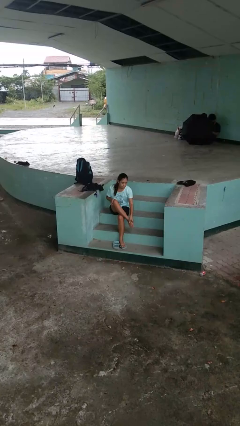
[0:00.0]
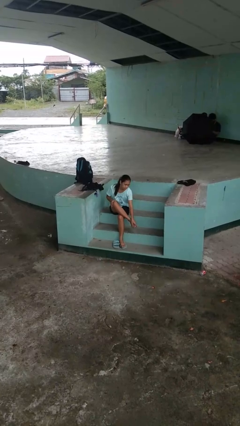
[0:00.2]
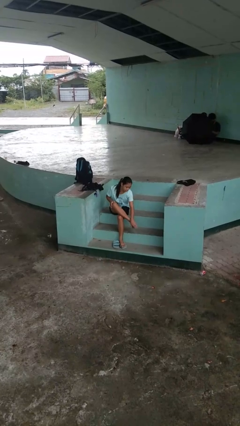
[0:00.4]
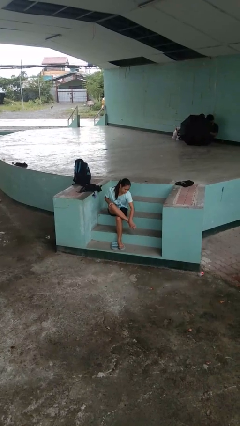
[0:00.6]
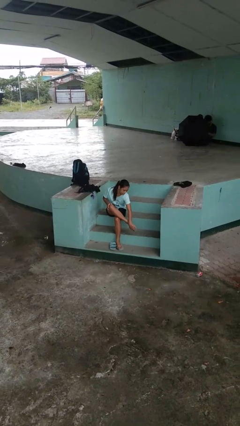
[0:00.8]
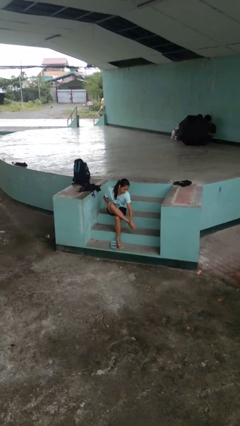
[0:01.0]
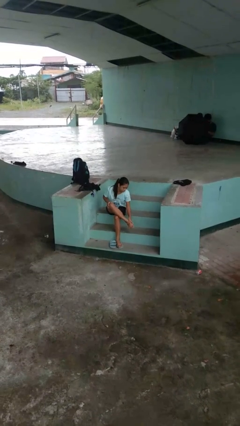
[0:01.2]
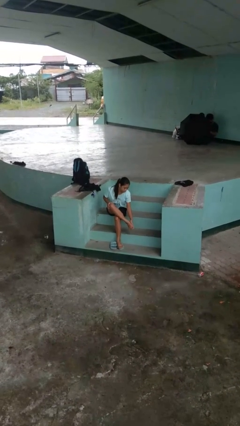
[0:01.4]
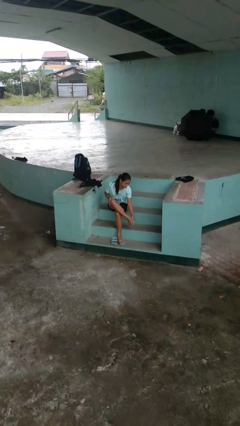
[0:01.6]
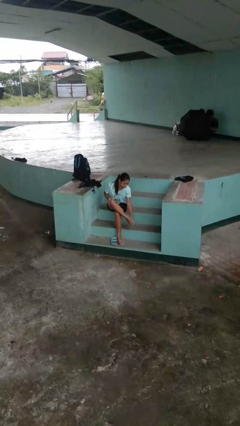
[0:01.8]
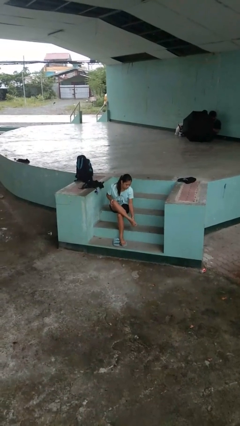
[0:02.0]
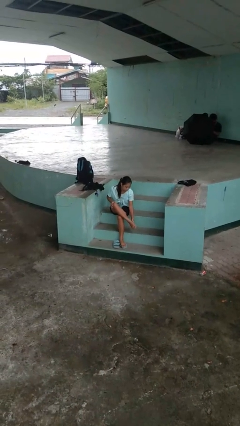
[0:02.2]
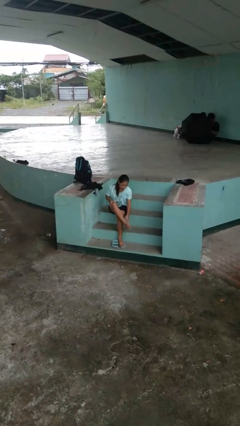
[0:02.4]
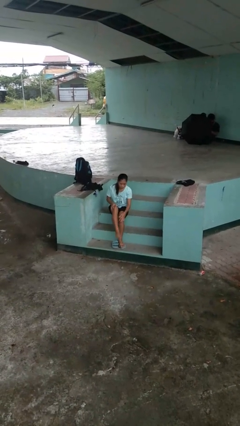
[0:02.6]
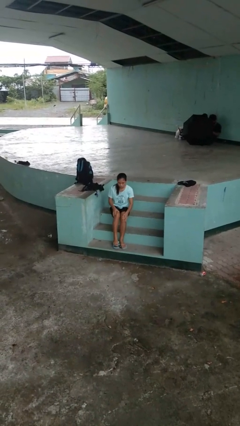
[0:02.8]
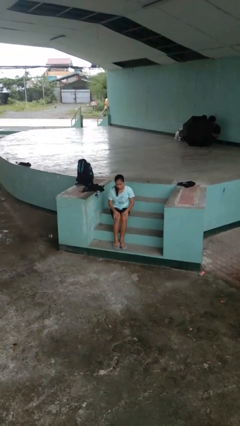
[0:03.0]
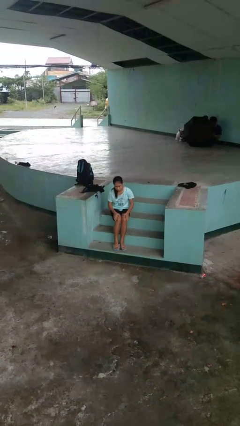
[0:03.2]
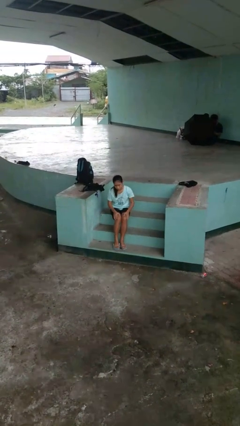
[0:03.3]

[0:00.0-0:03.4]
person rubs foot

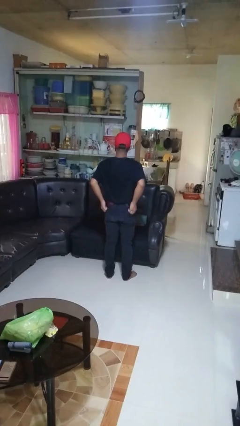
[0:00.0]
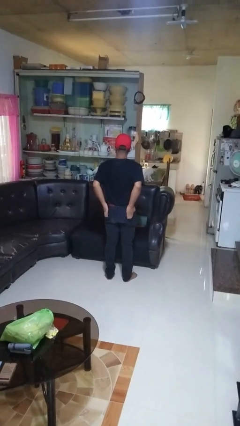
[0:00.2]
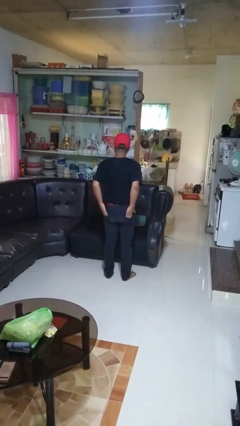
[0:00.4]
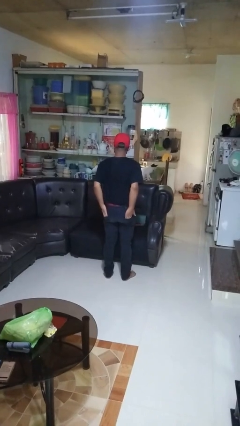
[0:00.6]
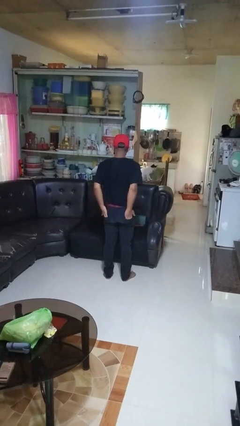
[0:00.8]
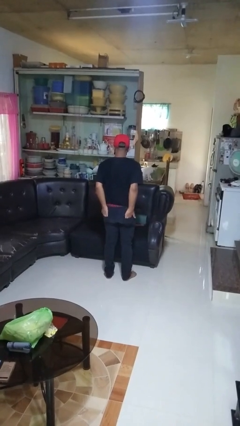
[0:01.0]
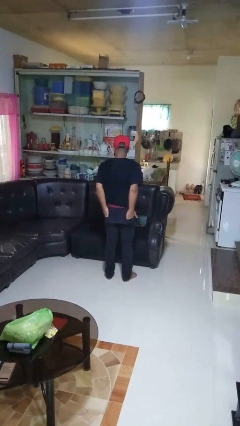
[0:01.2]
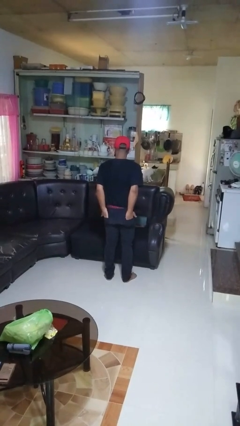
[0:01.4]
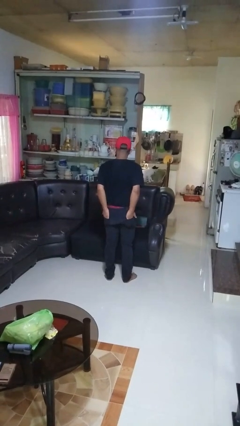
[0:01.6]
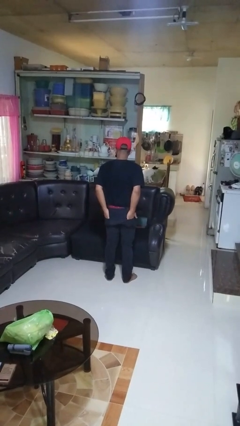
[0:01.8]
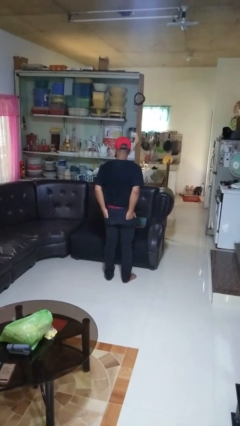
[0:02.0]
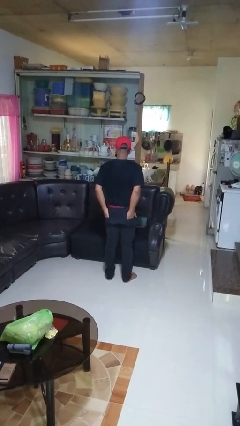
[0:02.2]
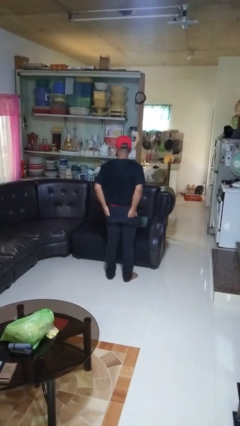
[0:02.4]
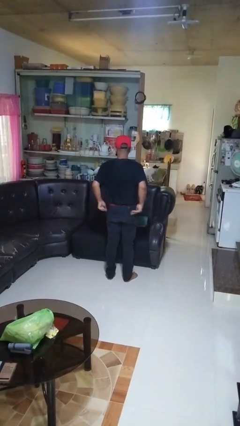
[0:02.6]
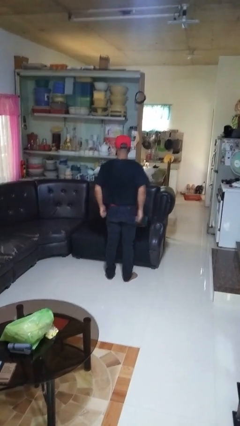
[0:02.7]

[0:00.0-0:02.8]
person puts hands in back pockets

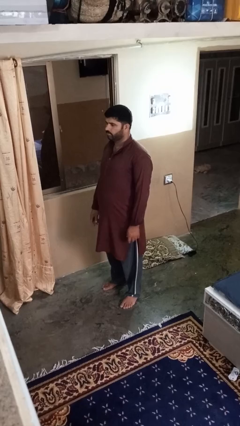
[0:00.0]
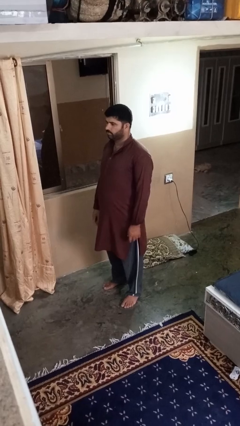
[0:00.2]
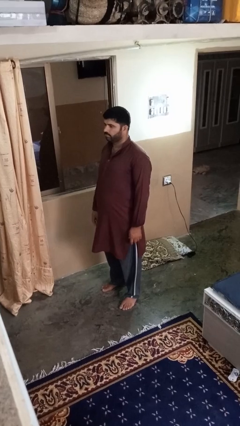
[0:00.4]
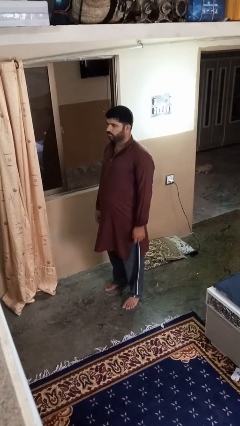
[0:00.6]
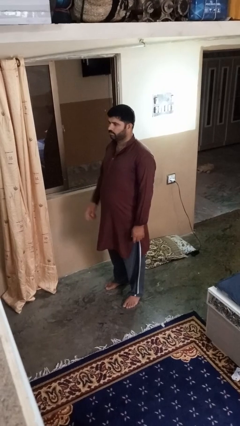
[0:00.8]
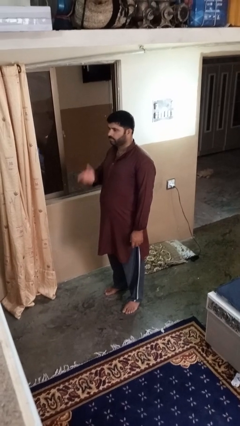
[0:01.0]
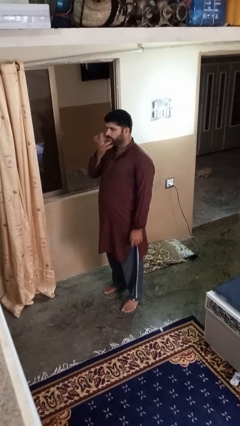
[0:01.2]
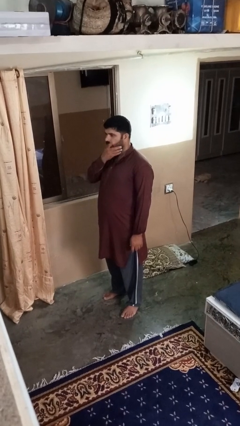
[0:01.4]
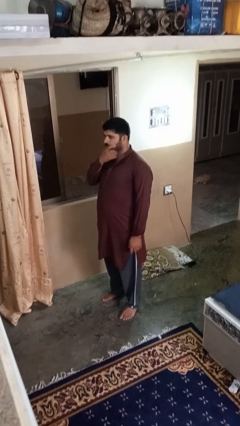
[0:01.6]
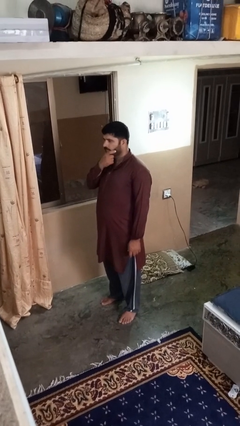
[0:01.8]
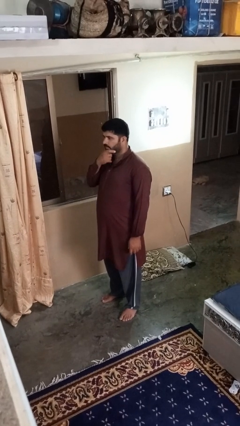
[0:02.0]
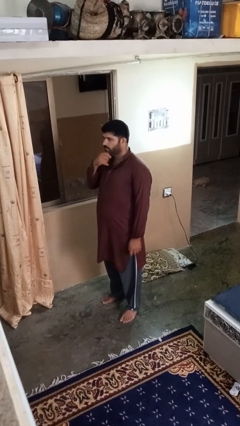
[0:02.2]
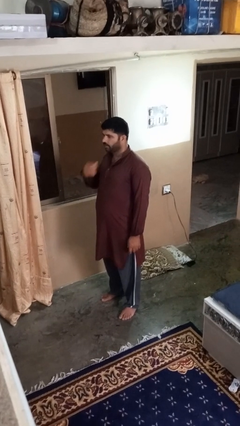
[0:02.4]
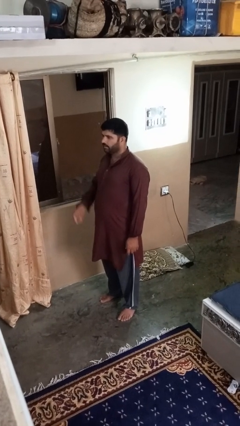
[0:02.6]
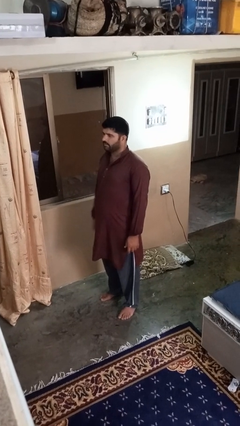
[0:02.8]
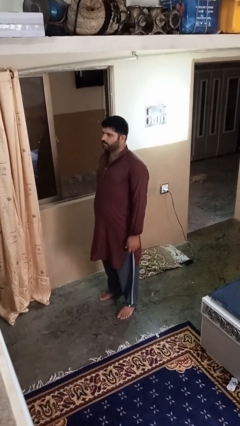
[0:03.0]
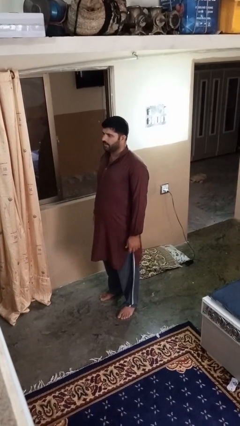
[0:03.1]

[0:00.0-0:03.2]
person strokes chin

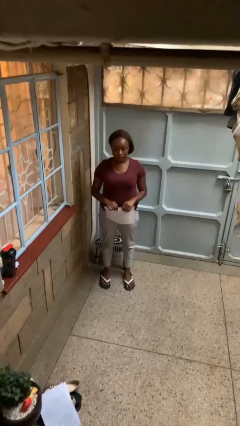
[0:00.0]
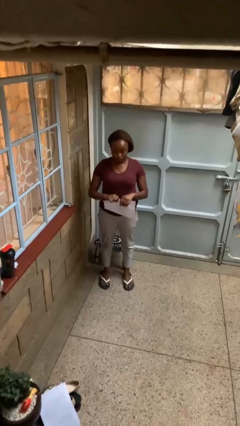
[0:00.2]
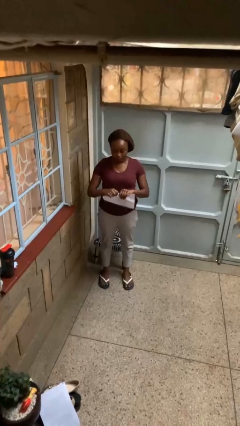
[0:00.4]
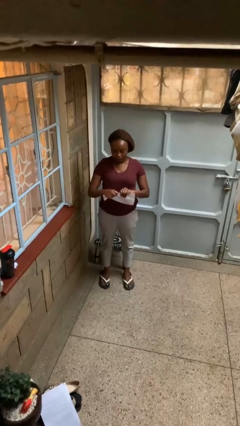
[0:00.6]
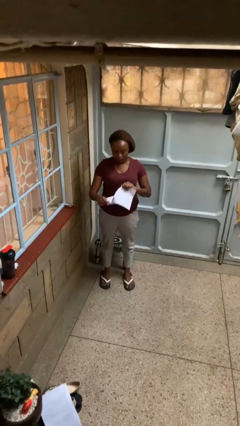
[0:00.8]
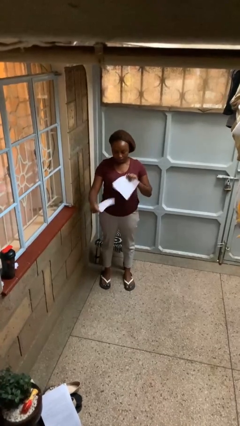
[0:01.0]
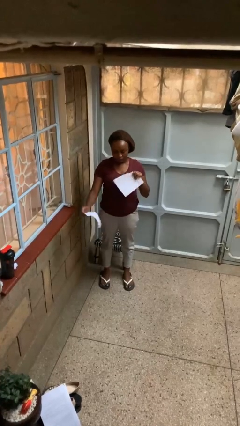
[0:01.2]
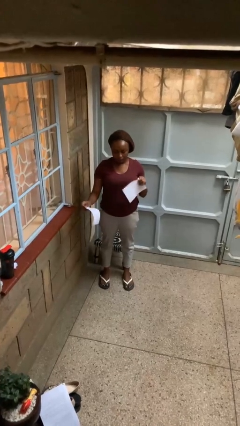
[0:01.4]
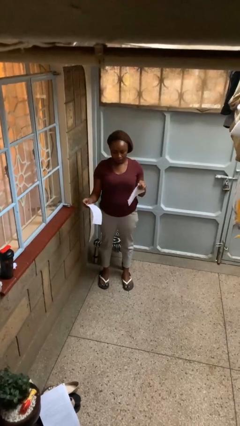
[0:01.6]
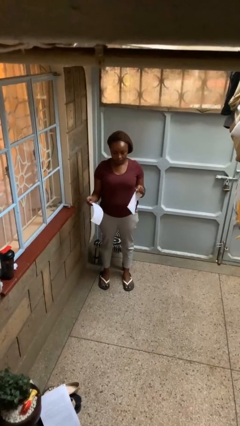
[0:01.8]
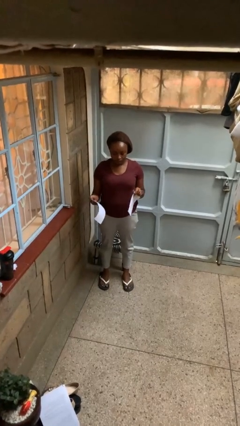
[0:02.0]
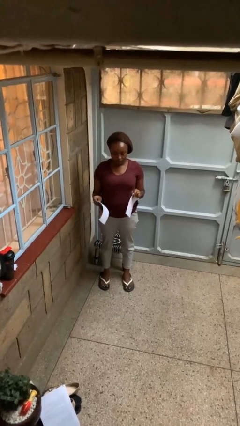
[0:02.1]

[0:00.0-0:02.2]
person tears paper

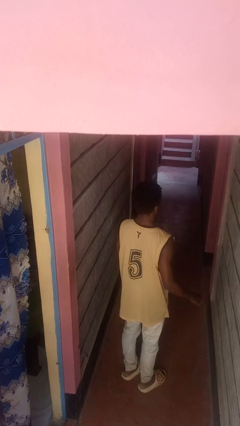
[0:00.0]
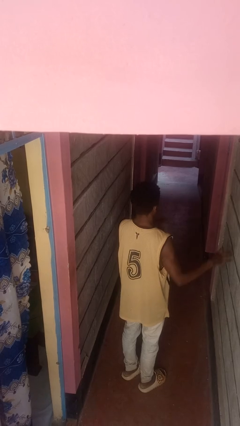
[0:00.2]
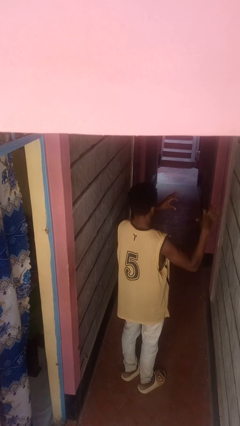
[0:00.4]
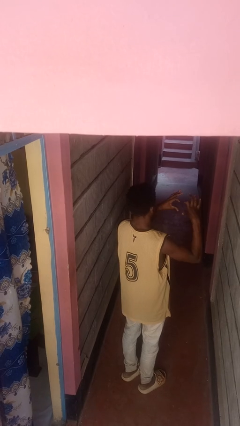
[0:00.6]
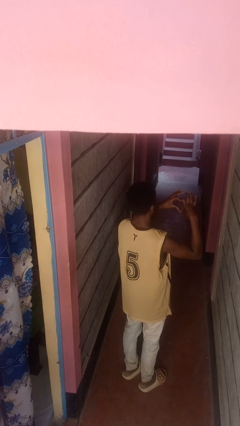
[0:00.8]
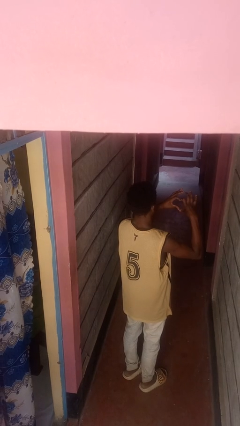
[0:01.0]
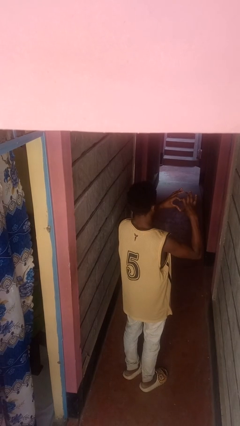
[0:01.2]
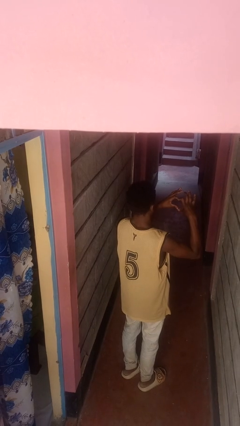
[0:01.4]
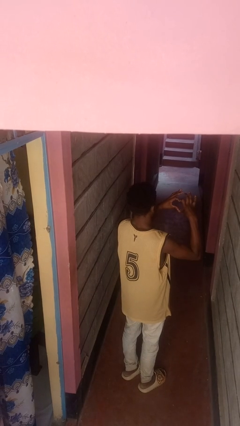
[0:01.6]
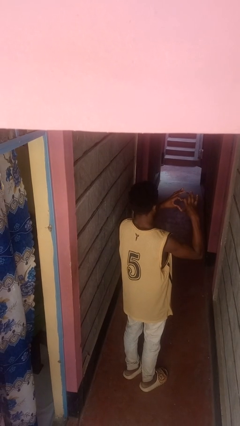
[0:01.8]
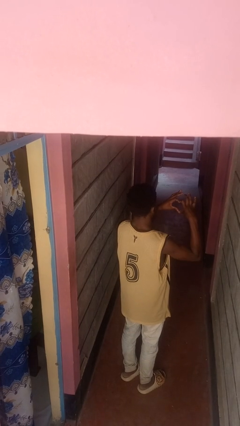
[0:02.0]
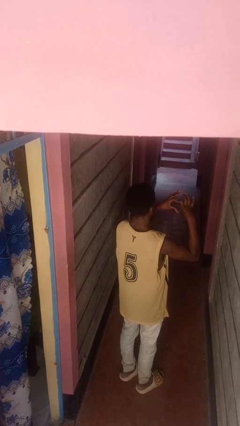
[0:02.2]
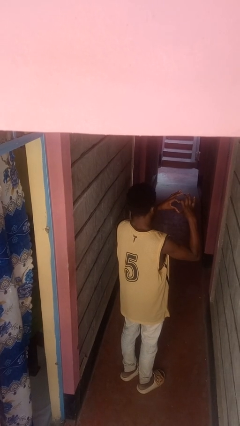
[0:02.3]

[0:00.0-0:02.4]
person gestures heart

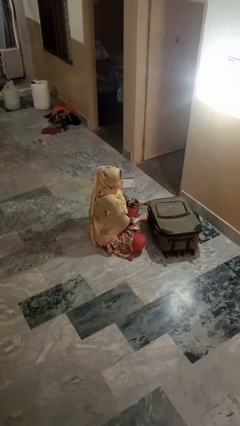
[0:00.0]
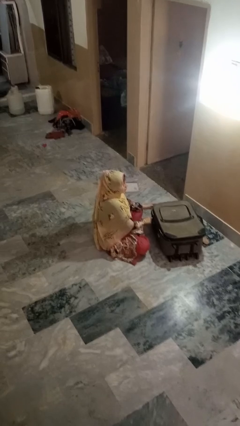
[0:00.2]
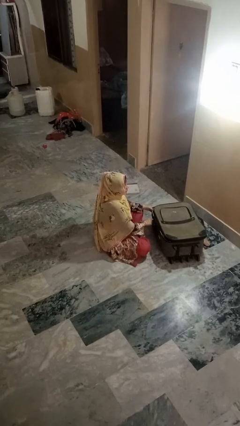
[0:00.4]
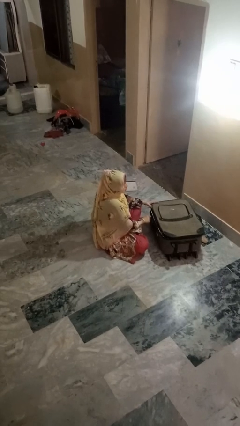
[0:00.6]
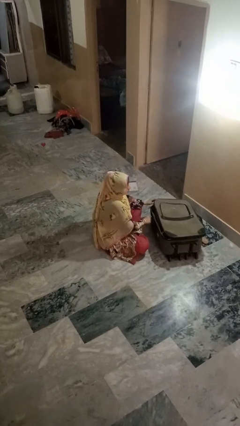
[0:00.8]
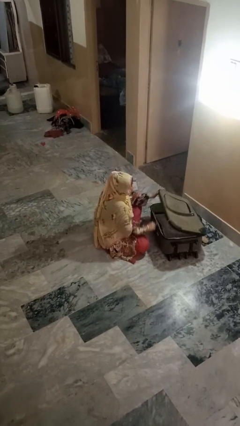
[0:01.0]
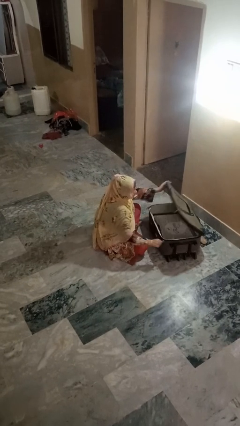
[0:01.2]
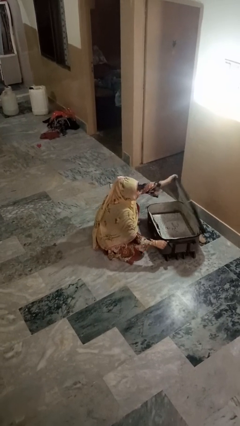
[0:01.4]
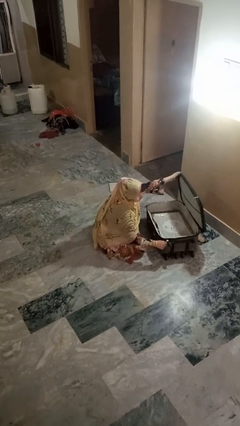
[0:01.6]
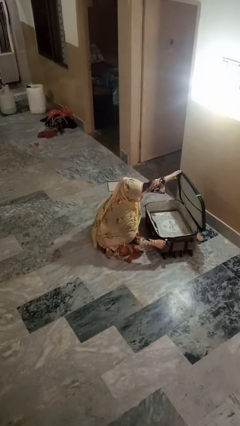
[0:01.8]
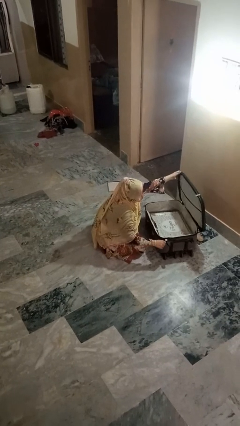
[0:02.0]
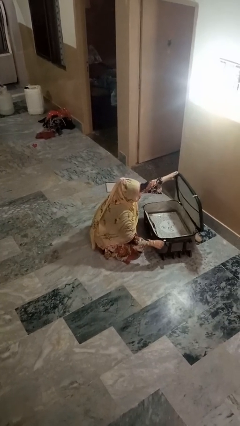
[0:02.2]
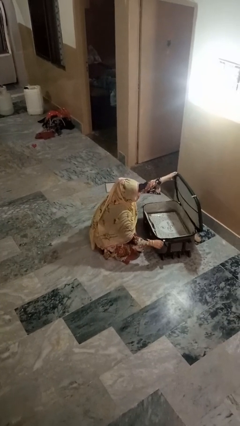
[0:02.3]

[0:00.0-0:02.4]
person opens suitcase

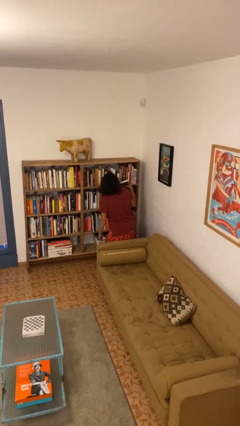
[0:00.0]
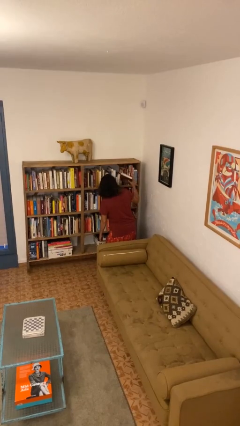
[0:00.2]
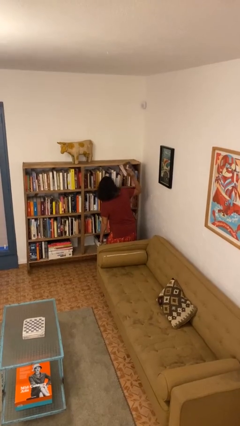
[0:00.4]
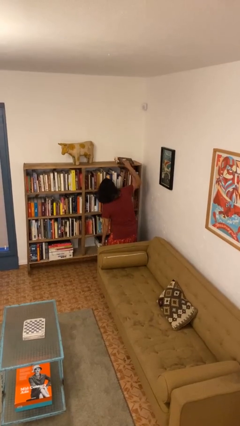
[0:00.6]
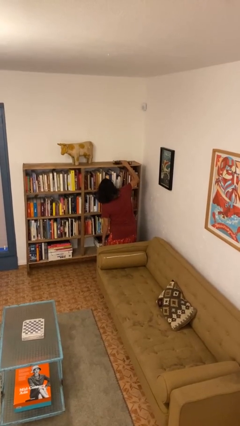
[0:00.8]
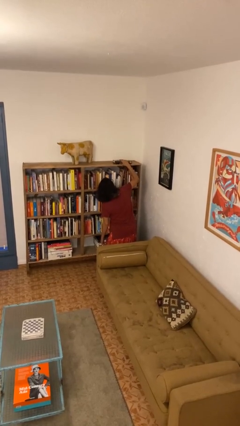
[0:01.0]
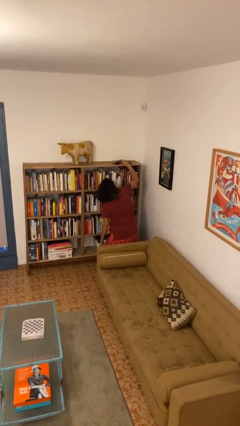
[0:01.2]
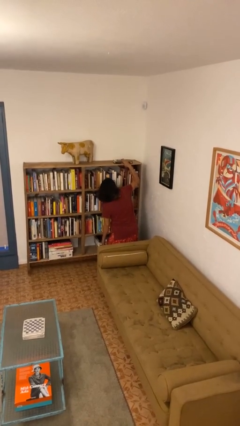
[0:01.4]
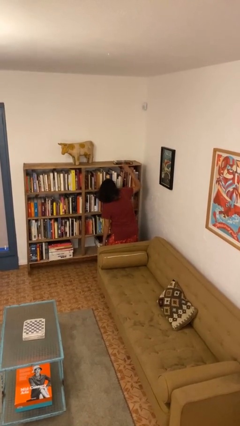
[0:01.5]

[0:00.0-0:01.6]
person puts down object on shelf
